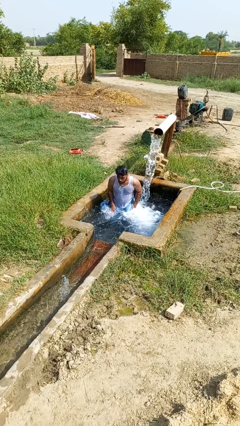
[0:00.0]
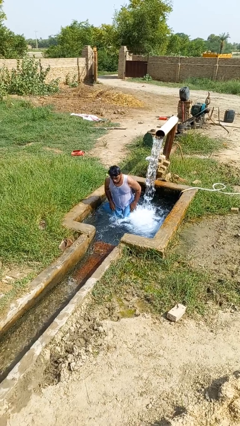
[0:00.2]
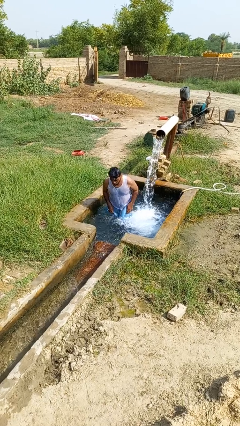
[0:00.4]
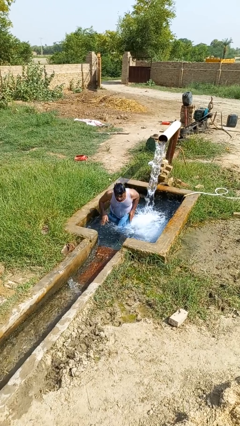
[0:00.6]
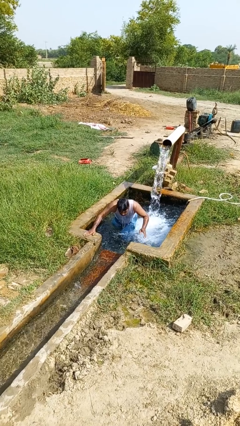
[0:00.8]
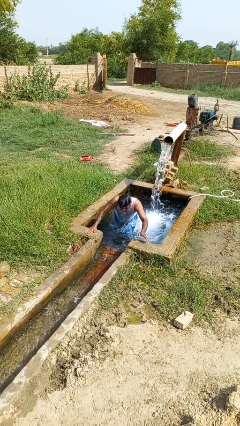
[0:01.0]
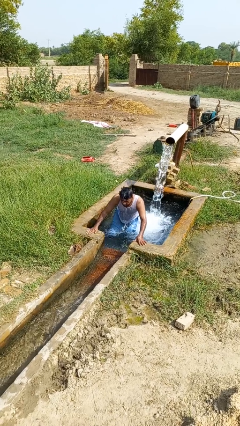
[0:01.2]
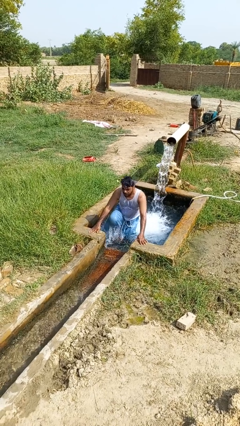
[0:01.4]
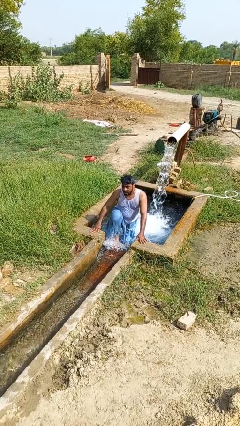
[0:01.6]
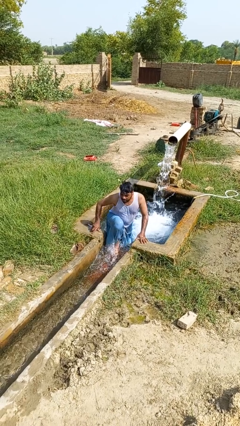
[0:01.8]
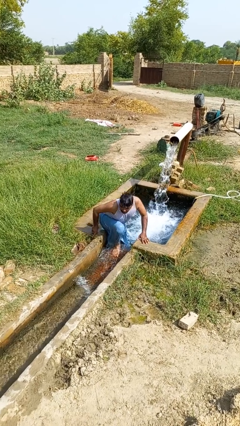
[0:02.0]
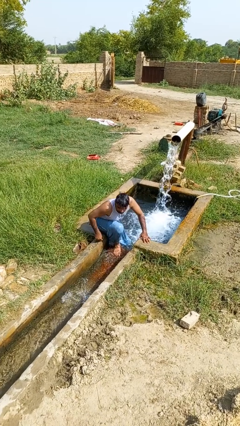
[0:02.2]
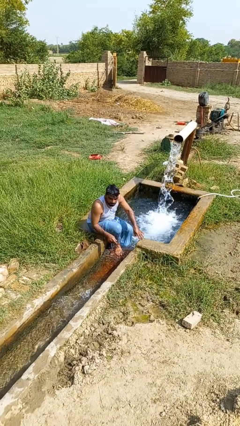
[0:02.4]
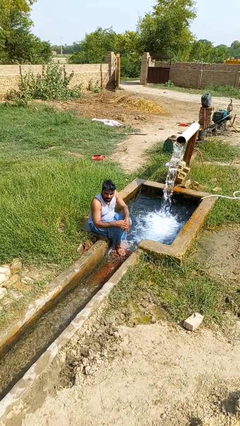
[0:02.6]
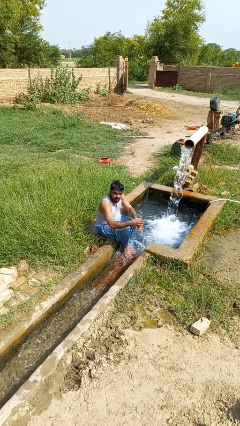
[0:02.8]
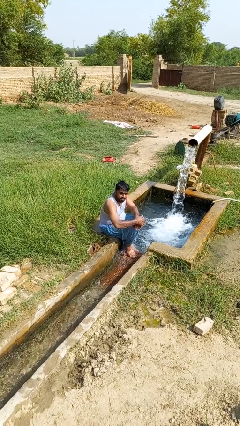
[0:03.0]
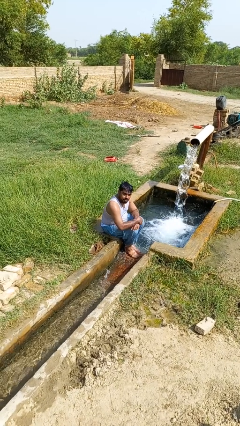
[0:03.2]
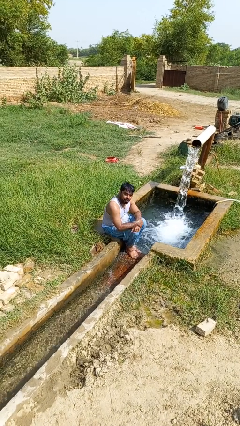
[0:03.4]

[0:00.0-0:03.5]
person exits pool

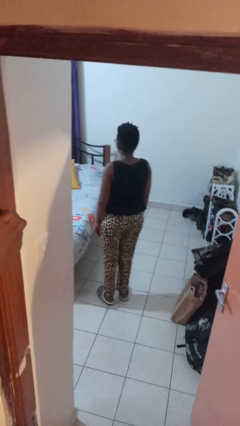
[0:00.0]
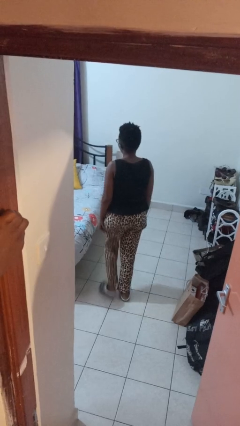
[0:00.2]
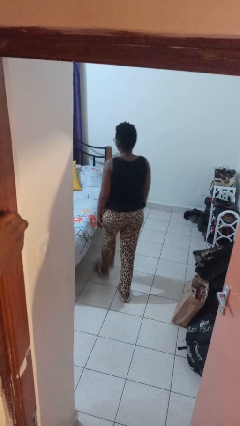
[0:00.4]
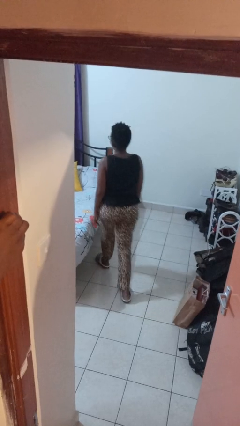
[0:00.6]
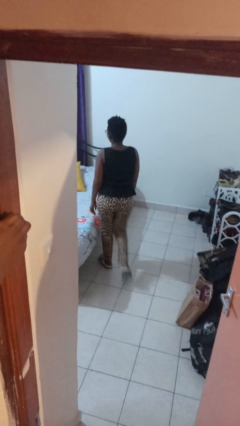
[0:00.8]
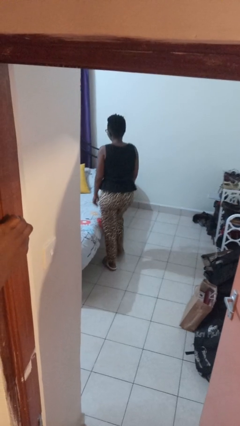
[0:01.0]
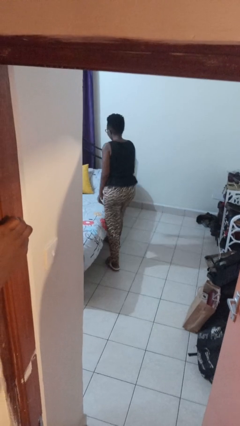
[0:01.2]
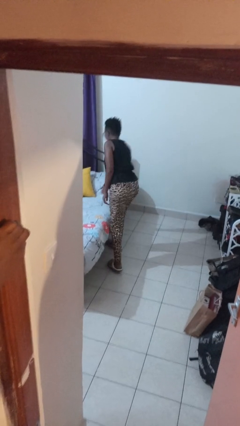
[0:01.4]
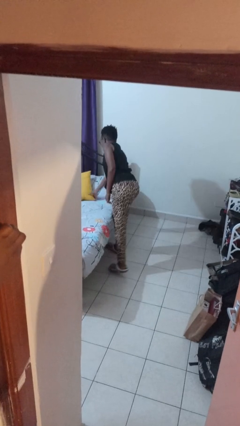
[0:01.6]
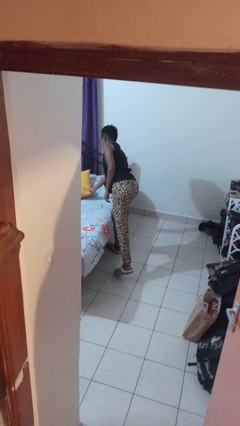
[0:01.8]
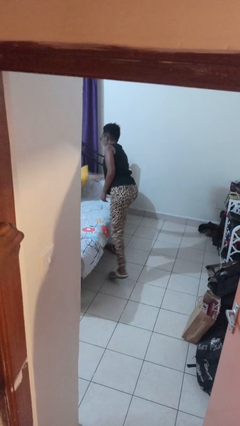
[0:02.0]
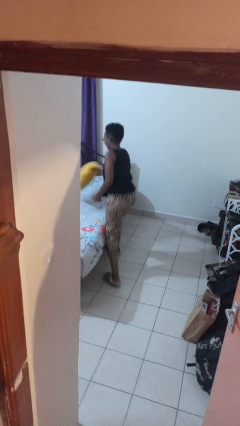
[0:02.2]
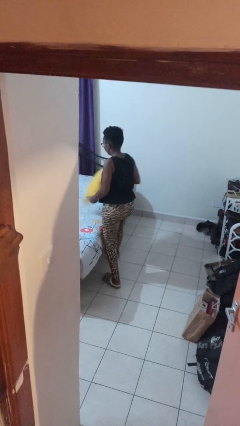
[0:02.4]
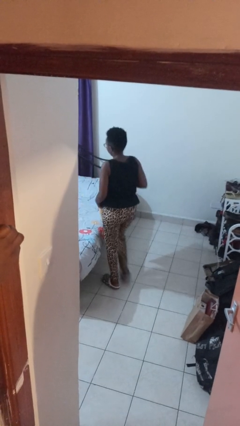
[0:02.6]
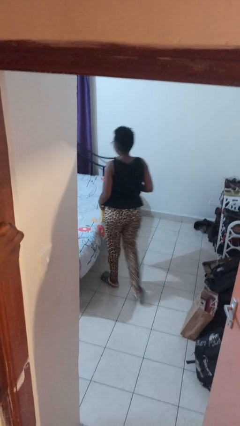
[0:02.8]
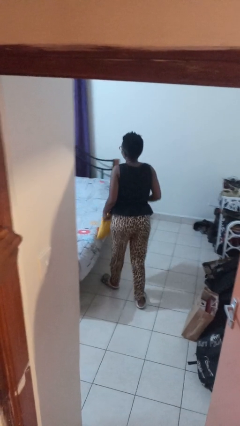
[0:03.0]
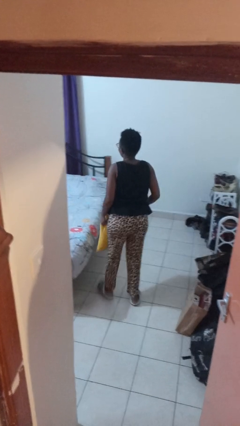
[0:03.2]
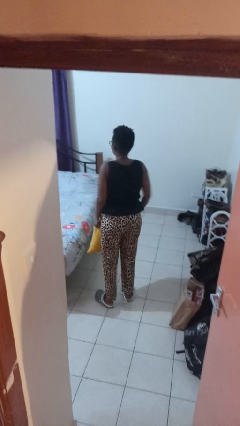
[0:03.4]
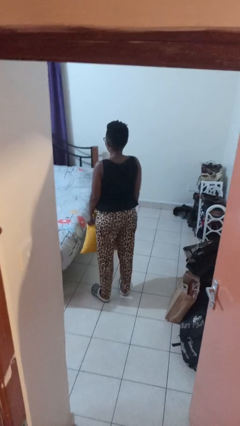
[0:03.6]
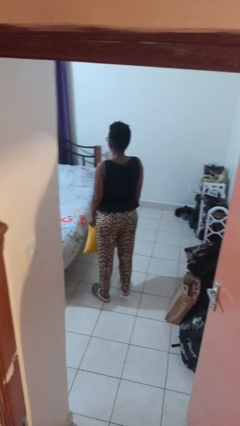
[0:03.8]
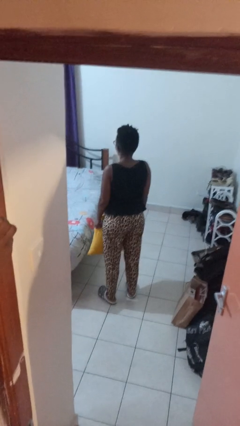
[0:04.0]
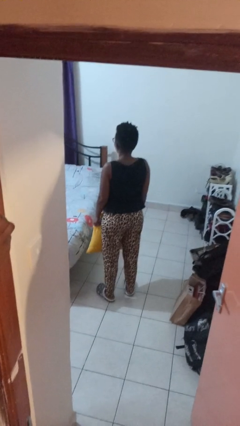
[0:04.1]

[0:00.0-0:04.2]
person picks up object from bed

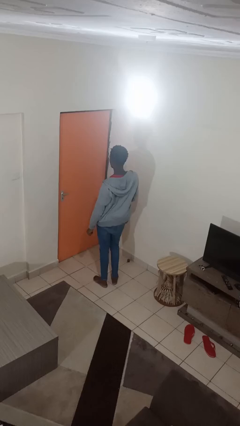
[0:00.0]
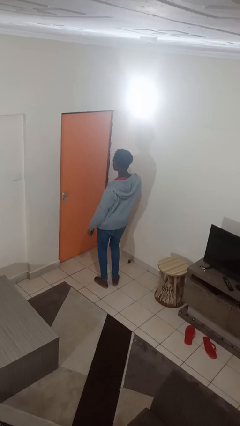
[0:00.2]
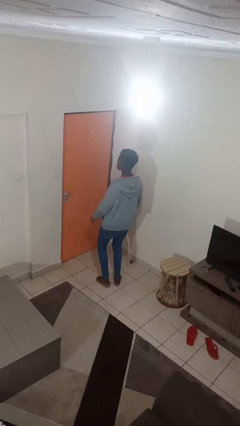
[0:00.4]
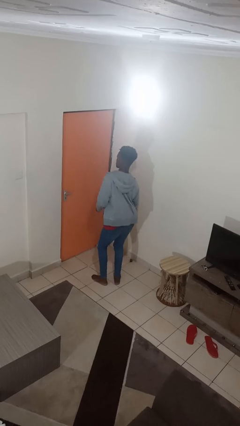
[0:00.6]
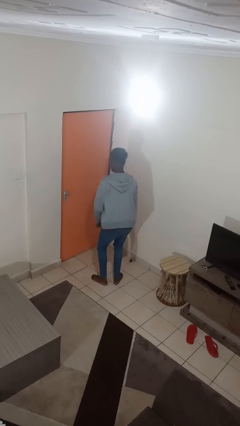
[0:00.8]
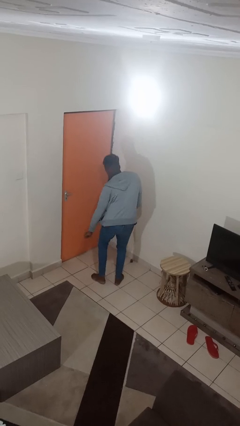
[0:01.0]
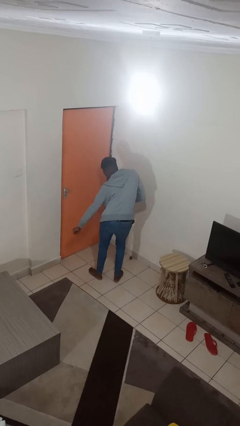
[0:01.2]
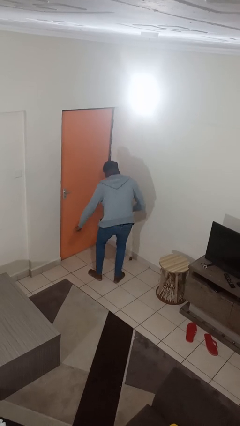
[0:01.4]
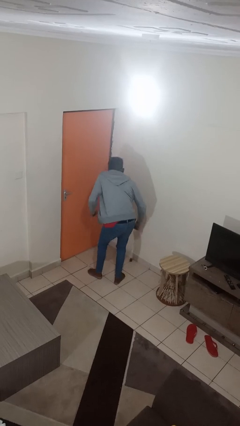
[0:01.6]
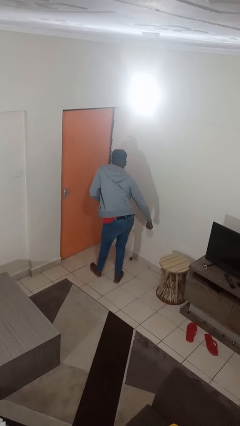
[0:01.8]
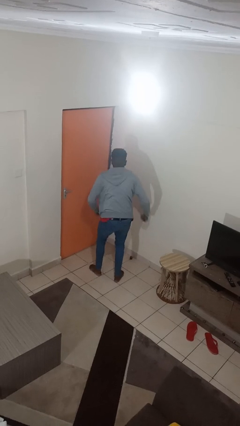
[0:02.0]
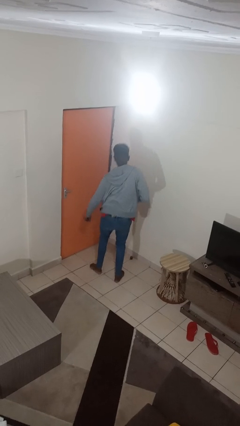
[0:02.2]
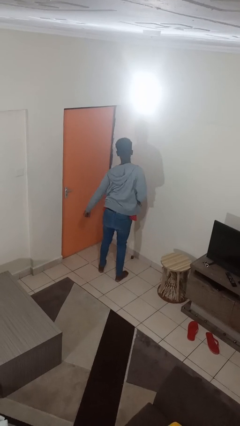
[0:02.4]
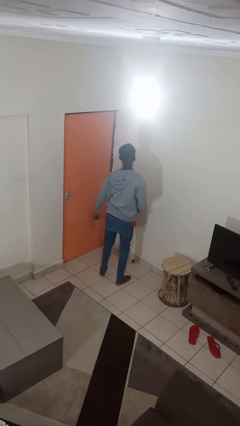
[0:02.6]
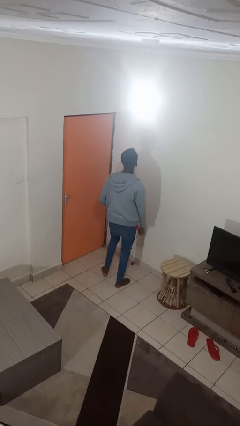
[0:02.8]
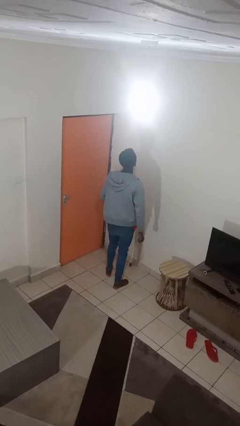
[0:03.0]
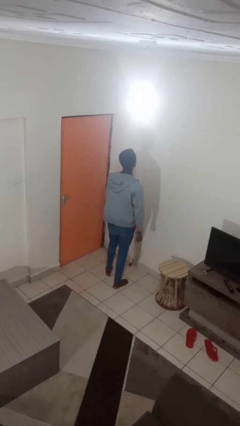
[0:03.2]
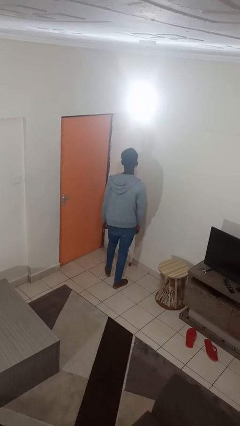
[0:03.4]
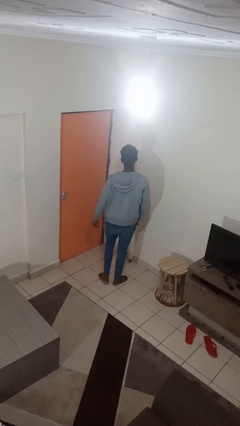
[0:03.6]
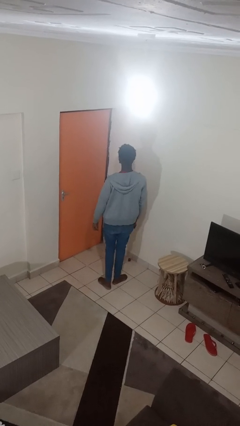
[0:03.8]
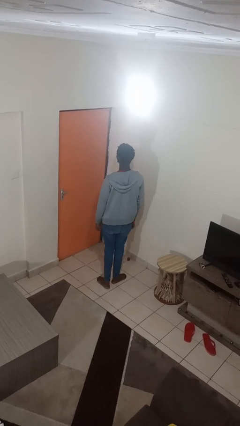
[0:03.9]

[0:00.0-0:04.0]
person dances in place

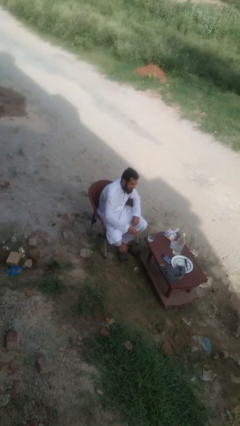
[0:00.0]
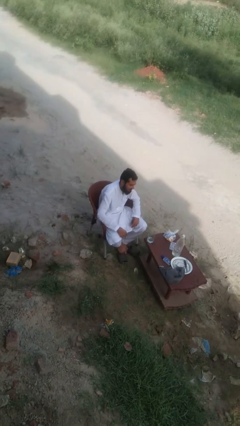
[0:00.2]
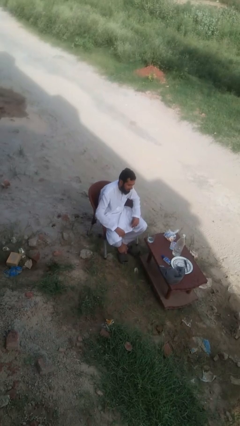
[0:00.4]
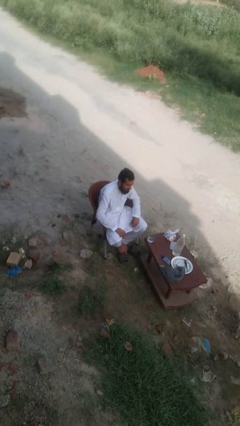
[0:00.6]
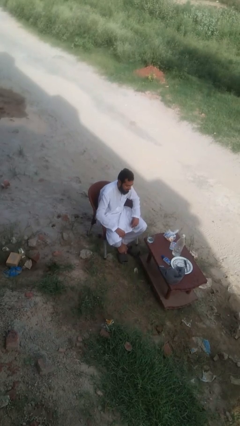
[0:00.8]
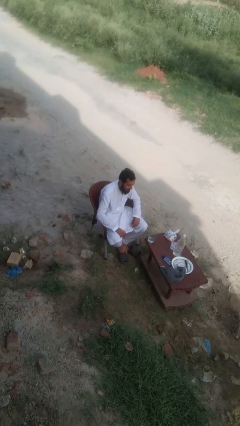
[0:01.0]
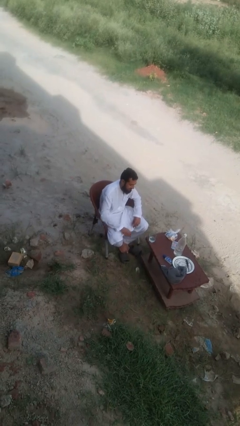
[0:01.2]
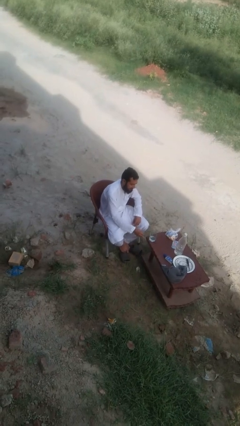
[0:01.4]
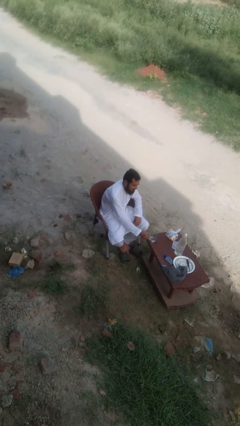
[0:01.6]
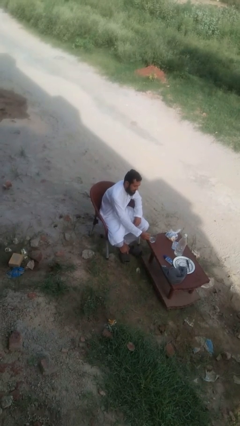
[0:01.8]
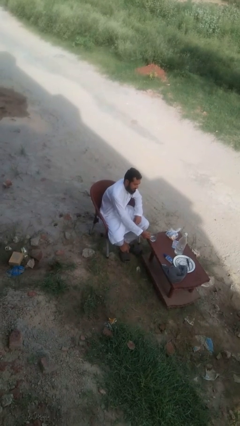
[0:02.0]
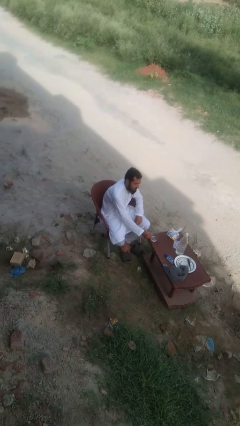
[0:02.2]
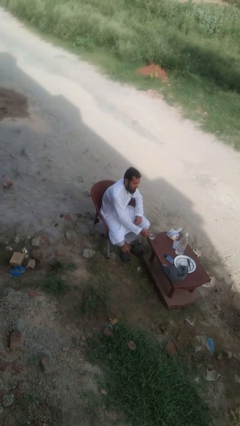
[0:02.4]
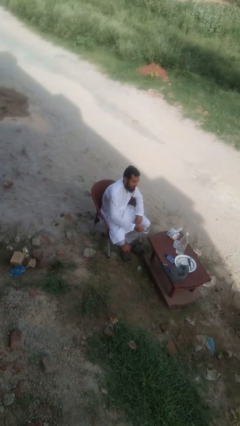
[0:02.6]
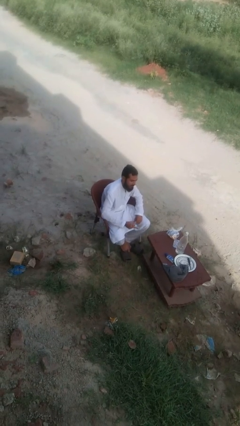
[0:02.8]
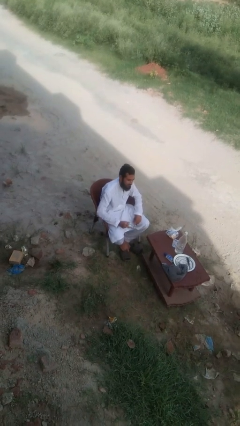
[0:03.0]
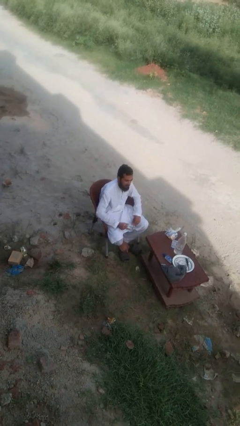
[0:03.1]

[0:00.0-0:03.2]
person picks up object from table

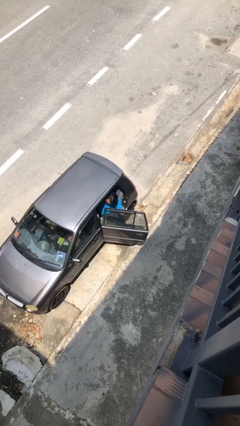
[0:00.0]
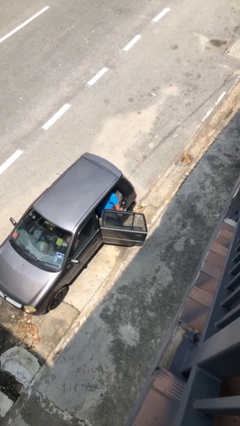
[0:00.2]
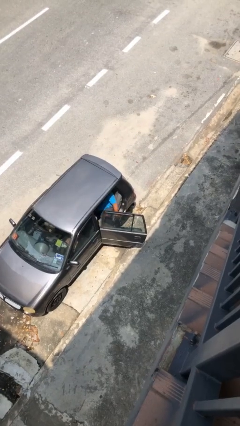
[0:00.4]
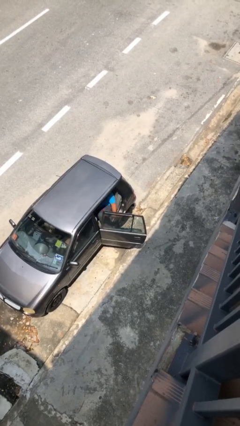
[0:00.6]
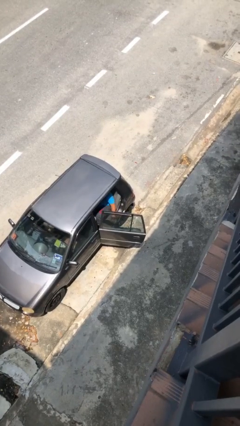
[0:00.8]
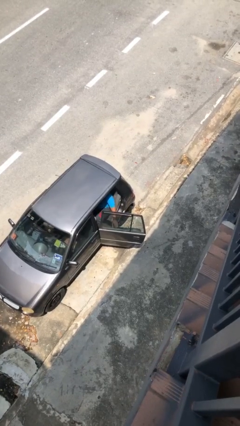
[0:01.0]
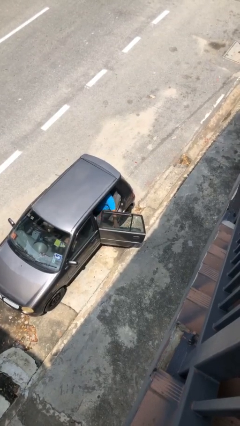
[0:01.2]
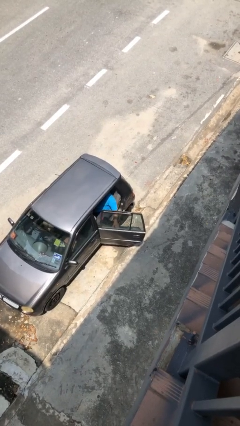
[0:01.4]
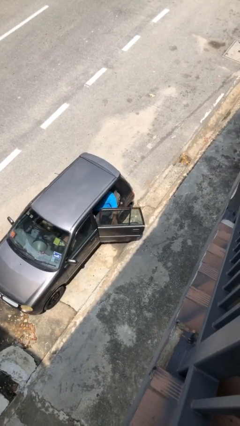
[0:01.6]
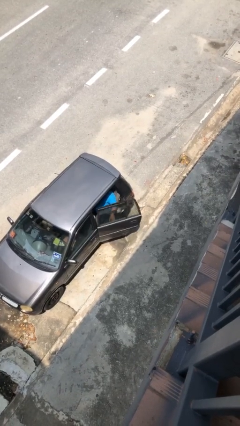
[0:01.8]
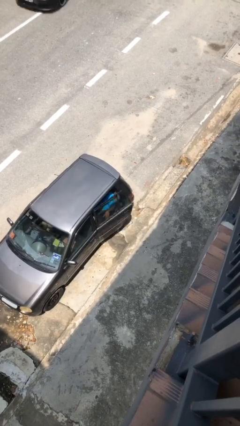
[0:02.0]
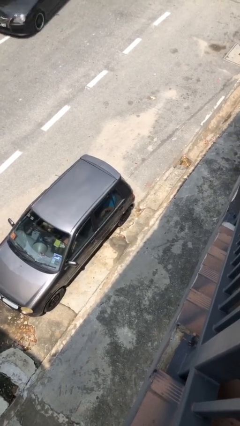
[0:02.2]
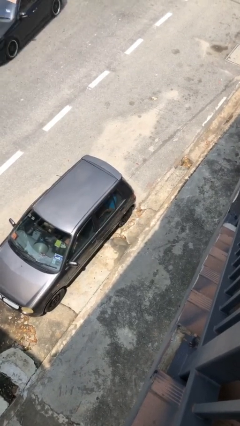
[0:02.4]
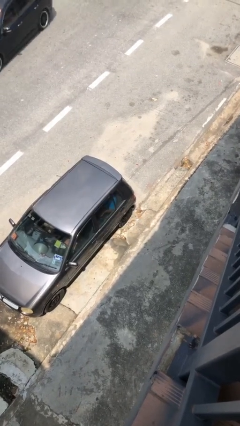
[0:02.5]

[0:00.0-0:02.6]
person closes car door
